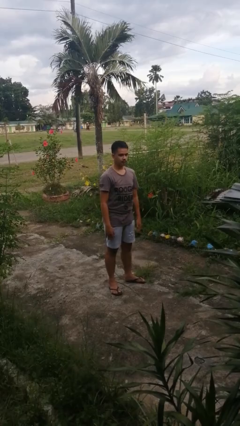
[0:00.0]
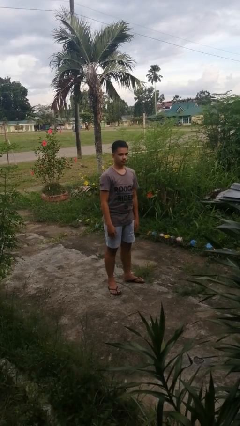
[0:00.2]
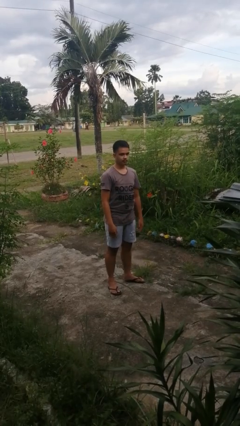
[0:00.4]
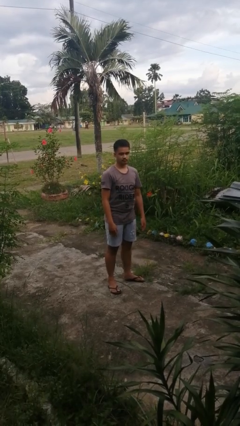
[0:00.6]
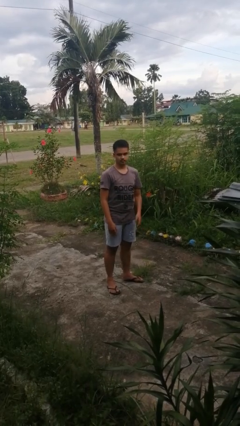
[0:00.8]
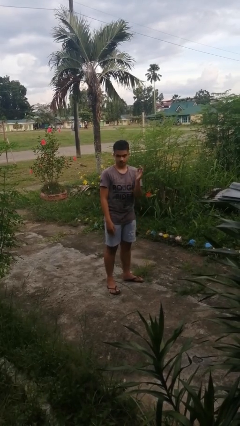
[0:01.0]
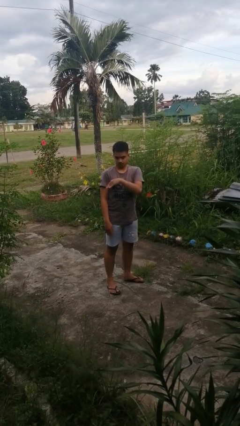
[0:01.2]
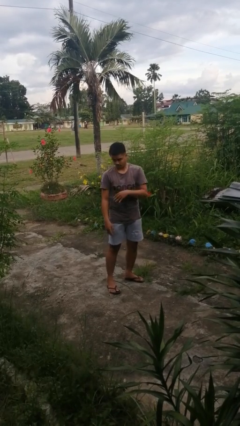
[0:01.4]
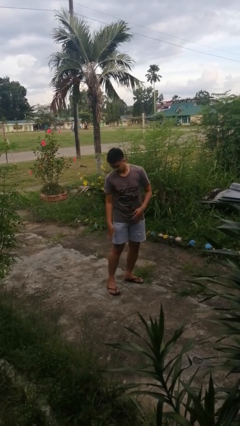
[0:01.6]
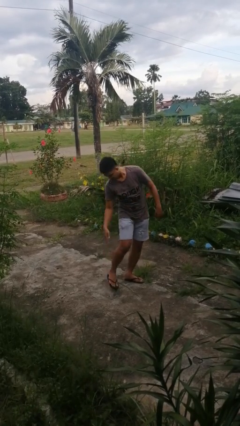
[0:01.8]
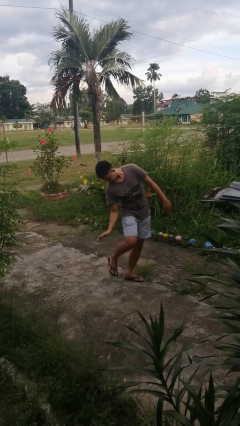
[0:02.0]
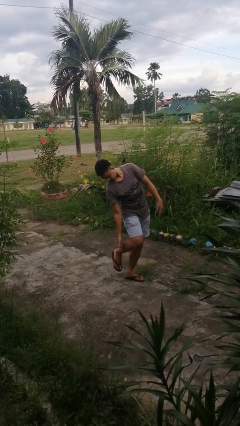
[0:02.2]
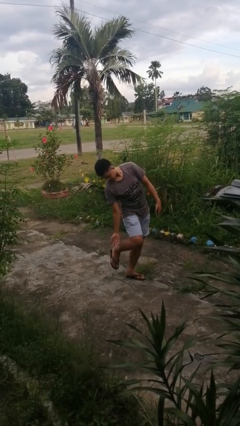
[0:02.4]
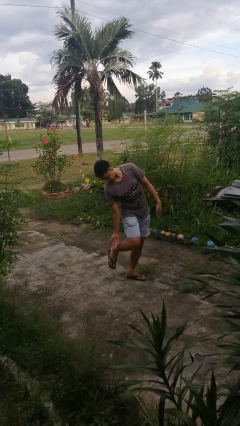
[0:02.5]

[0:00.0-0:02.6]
person swats bug

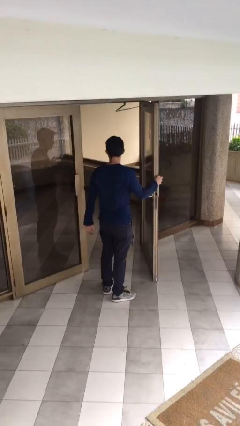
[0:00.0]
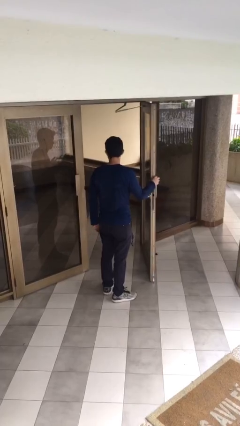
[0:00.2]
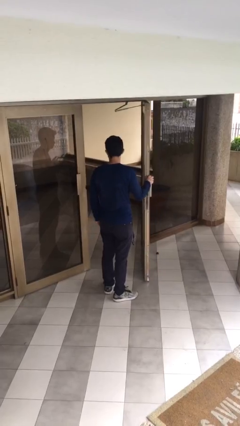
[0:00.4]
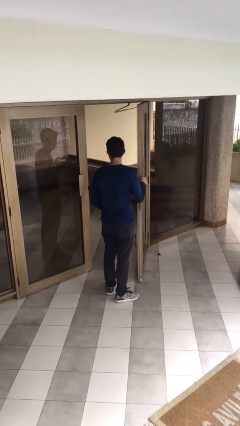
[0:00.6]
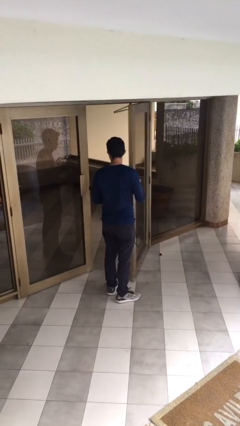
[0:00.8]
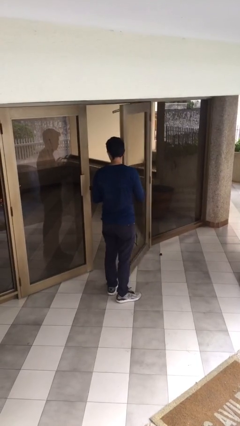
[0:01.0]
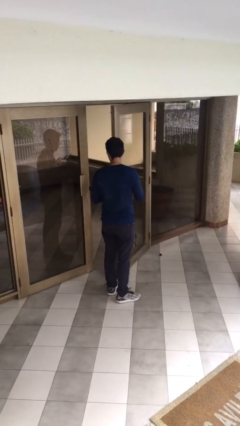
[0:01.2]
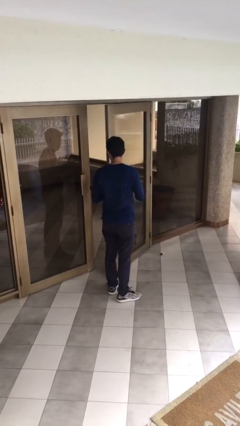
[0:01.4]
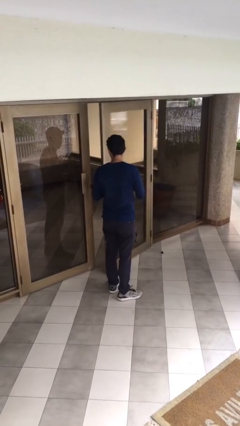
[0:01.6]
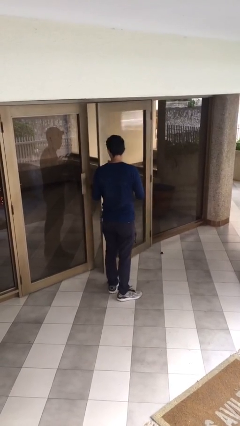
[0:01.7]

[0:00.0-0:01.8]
person closes facility door

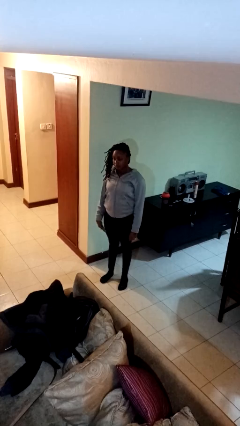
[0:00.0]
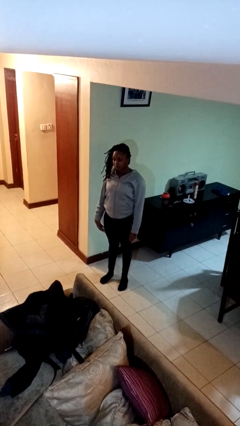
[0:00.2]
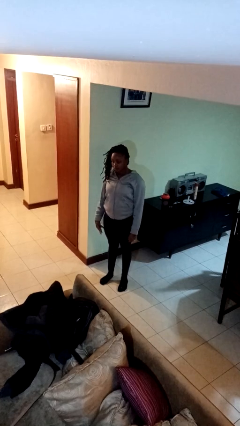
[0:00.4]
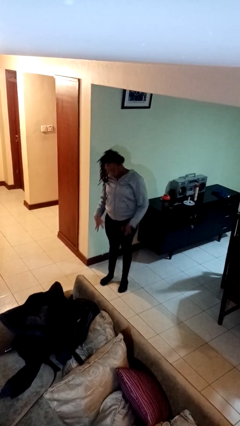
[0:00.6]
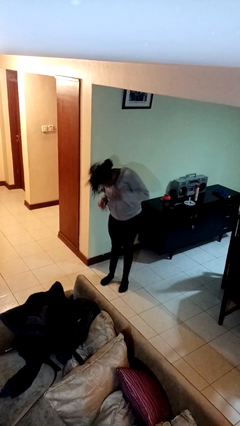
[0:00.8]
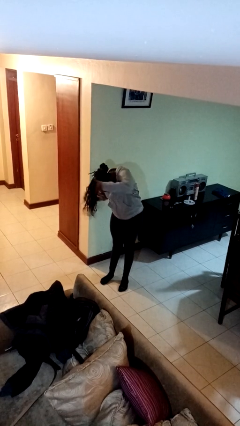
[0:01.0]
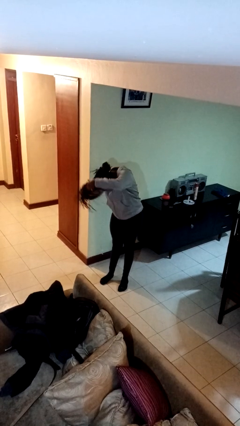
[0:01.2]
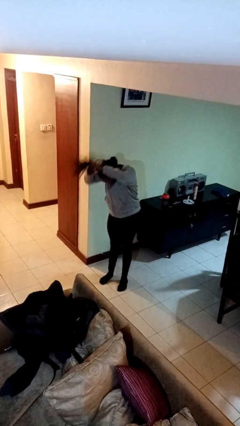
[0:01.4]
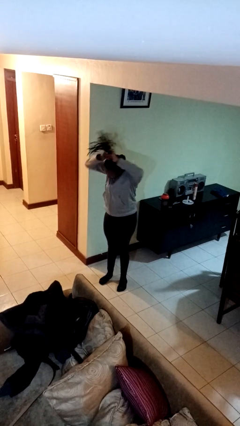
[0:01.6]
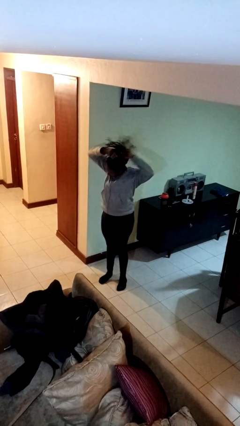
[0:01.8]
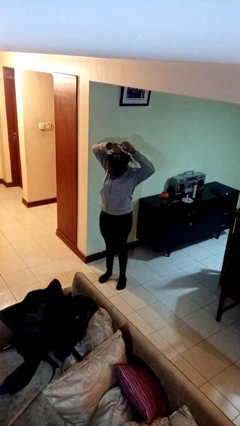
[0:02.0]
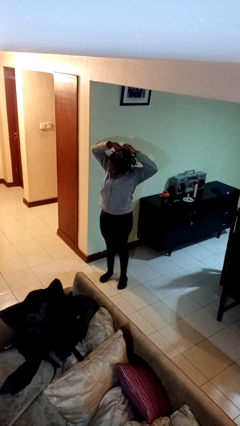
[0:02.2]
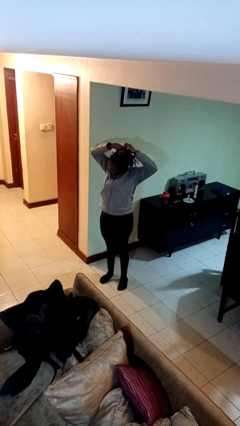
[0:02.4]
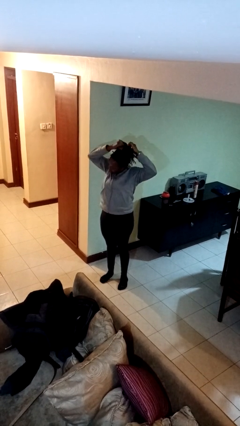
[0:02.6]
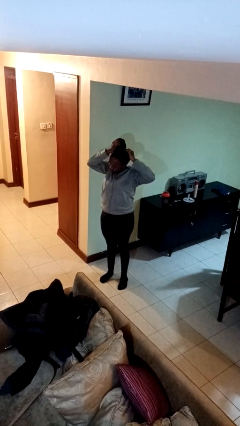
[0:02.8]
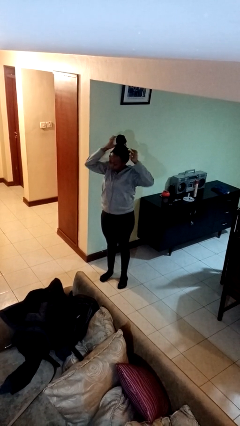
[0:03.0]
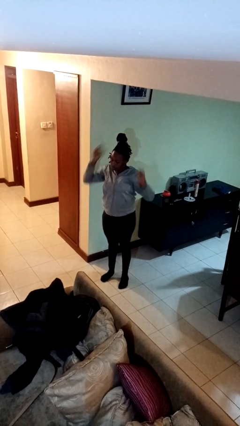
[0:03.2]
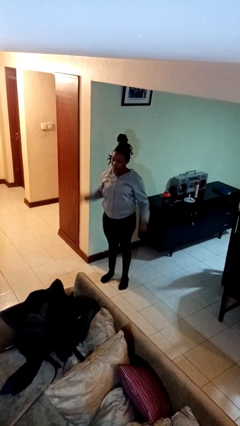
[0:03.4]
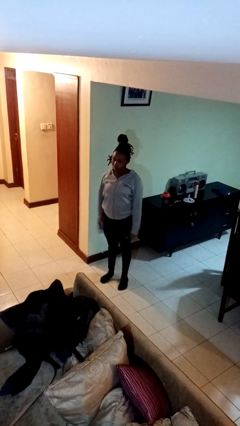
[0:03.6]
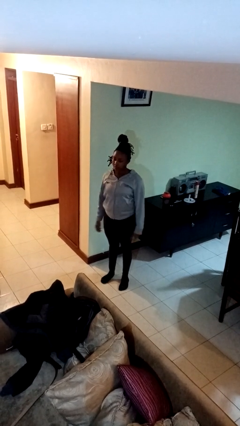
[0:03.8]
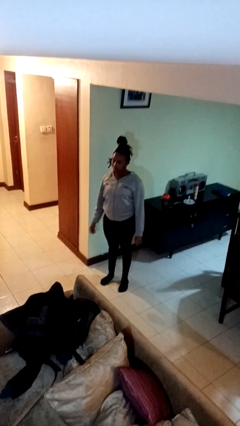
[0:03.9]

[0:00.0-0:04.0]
person puts hair in ponytail

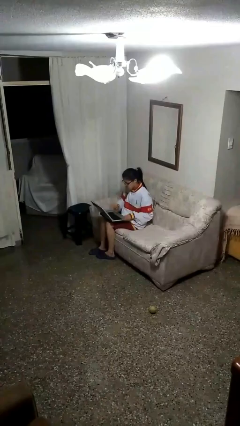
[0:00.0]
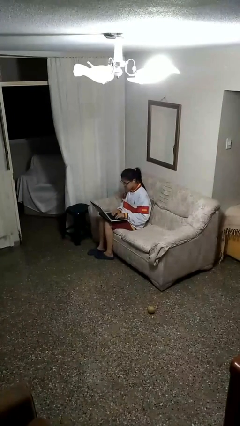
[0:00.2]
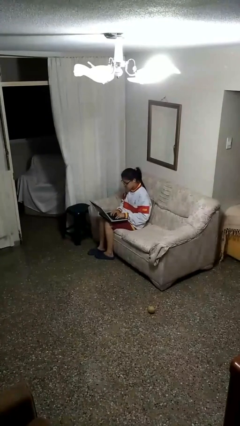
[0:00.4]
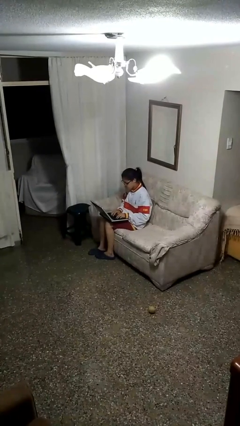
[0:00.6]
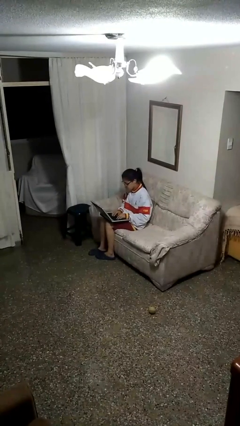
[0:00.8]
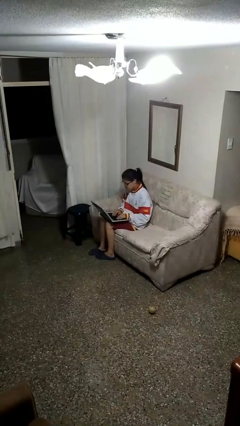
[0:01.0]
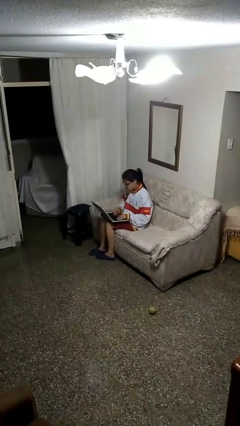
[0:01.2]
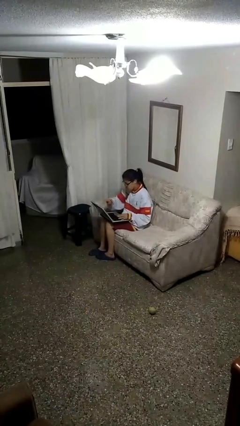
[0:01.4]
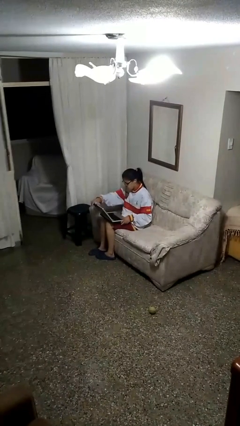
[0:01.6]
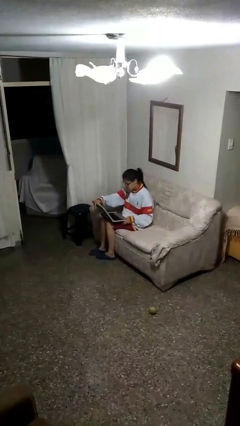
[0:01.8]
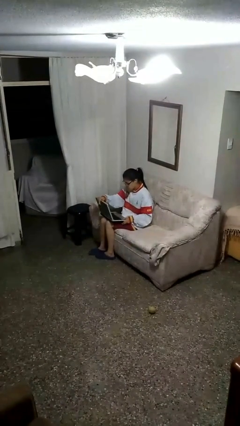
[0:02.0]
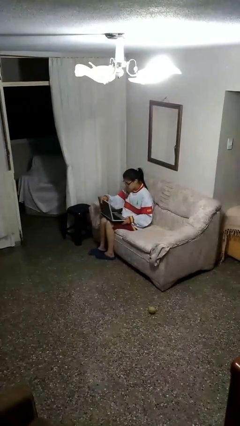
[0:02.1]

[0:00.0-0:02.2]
person interacts with laptop

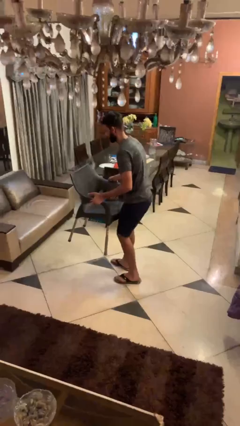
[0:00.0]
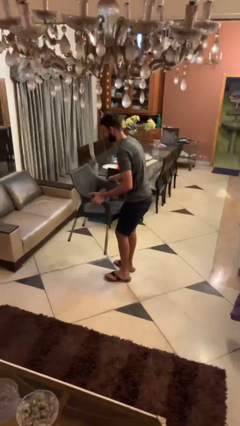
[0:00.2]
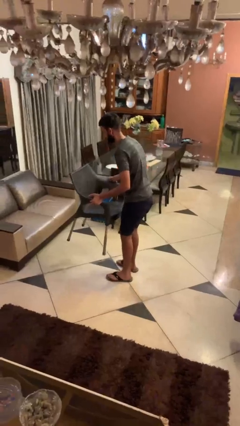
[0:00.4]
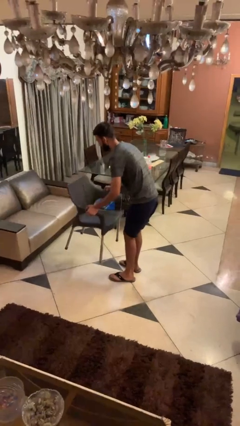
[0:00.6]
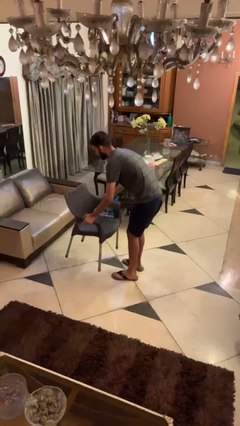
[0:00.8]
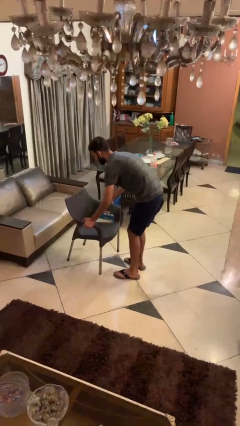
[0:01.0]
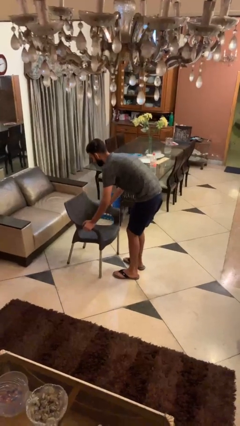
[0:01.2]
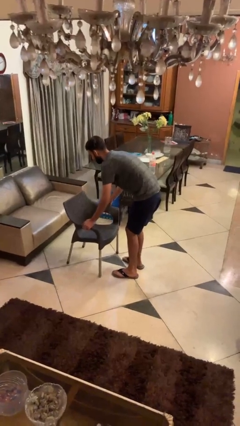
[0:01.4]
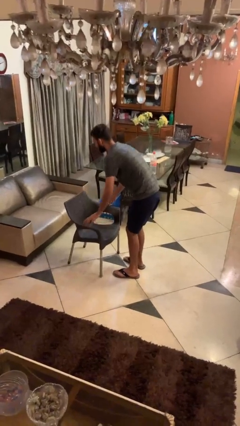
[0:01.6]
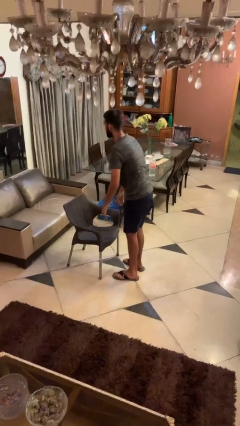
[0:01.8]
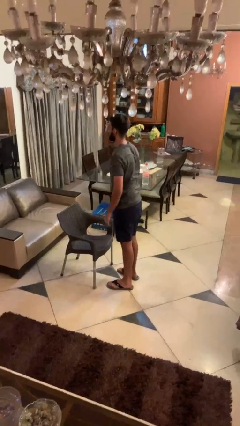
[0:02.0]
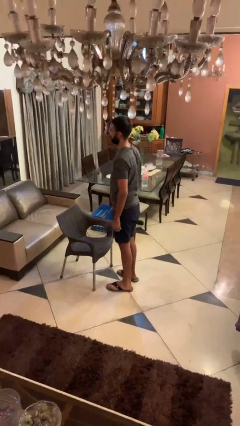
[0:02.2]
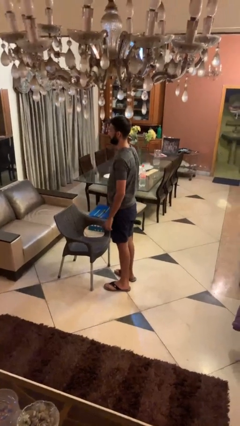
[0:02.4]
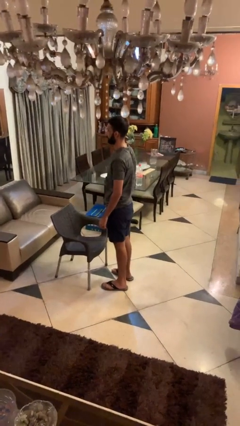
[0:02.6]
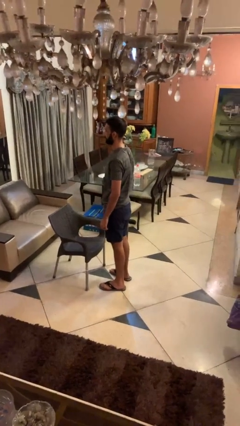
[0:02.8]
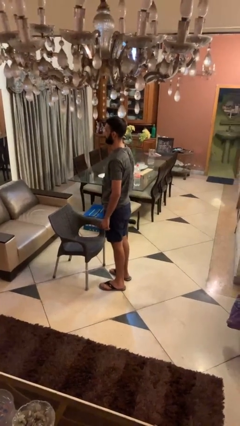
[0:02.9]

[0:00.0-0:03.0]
person puts down object on floor

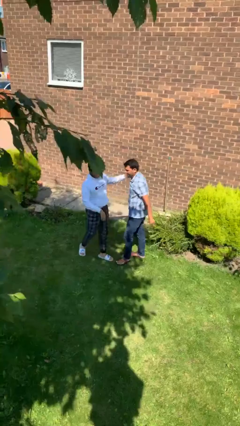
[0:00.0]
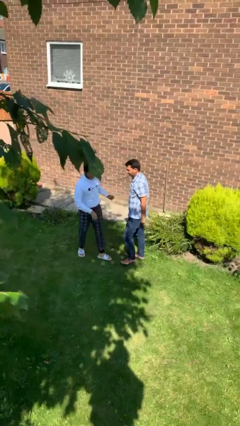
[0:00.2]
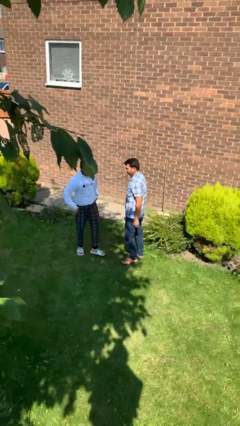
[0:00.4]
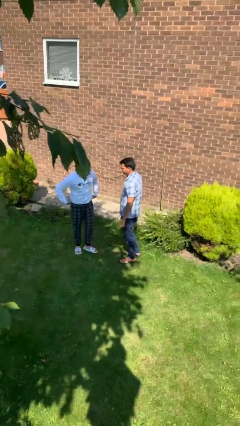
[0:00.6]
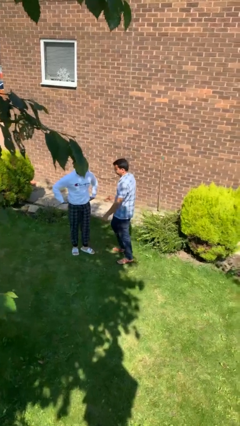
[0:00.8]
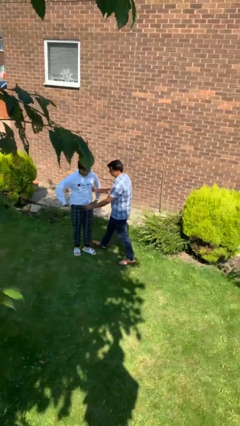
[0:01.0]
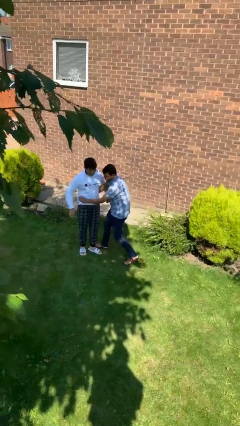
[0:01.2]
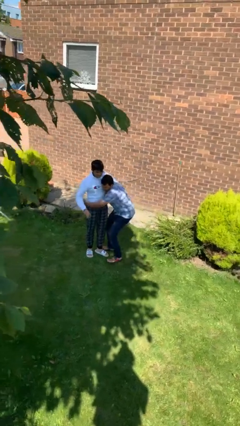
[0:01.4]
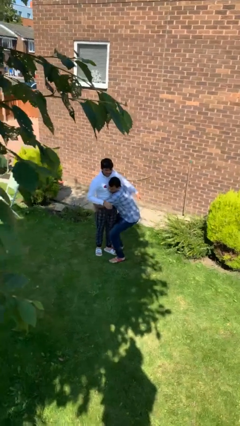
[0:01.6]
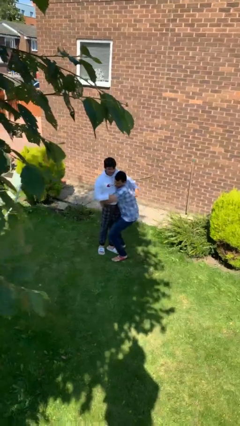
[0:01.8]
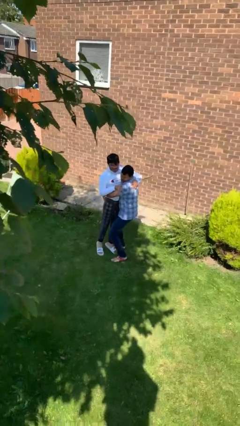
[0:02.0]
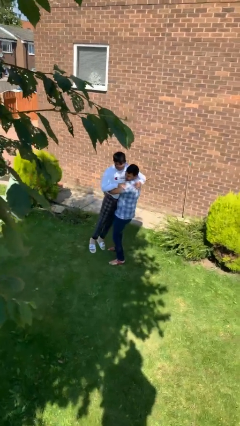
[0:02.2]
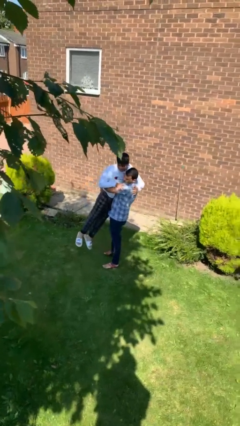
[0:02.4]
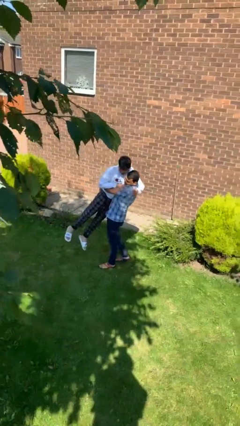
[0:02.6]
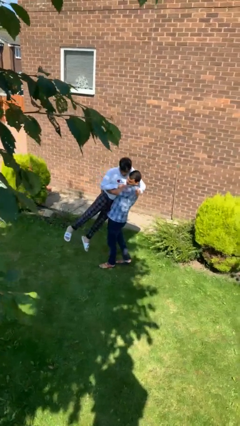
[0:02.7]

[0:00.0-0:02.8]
person picks up person

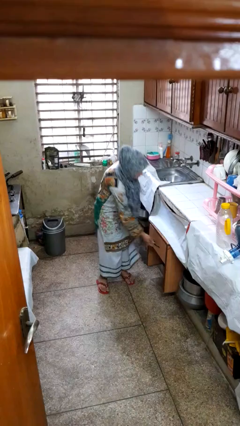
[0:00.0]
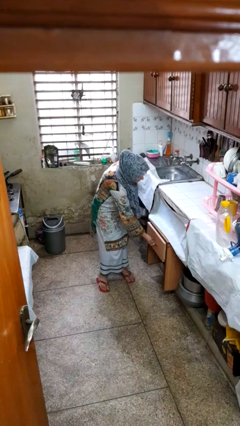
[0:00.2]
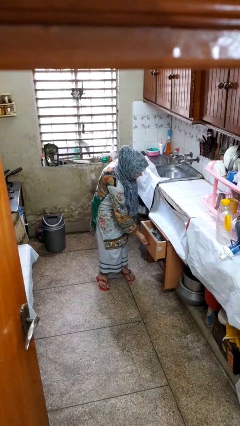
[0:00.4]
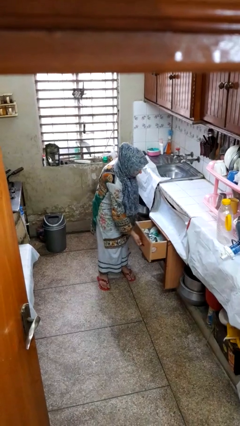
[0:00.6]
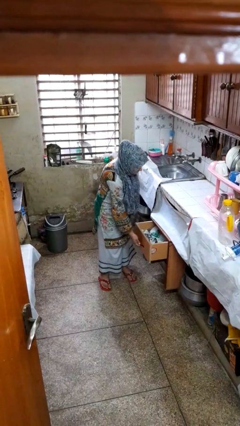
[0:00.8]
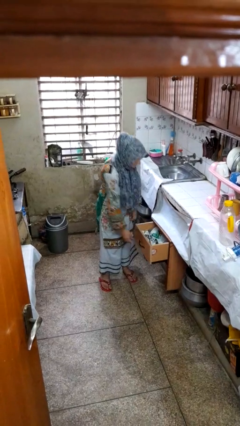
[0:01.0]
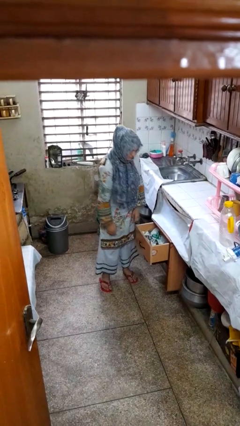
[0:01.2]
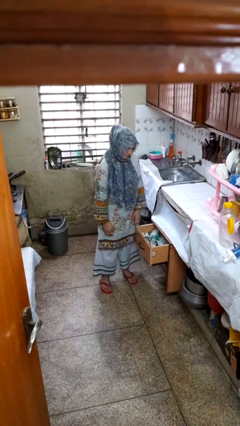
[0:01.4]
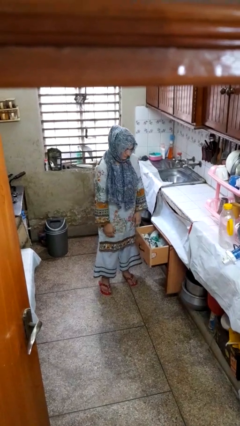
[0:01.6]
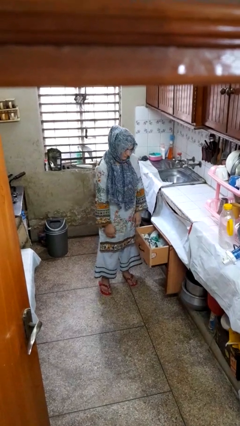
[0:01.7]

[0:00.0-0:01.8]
person opens kitchen drawer
